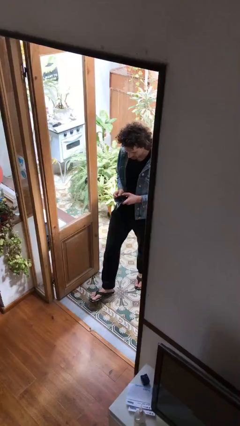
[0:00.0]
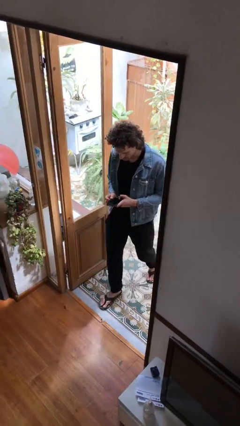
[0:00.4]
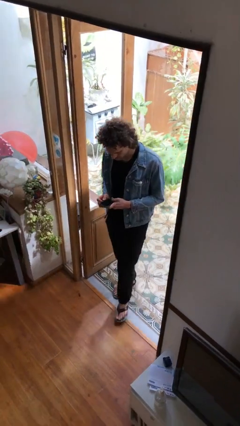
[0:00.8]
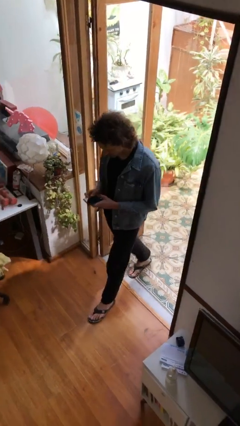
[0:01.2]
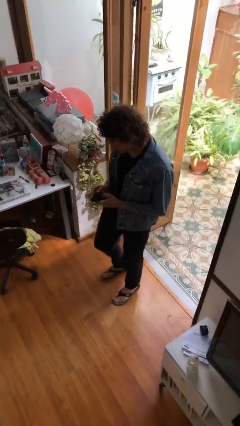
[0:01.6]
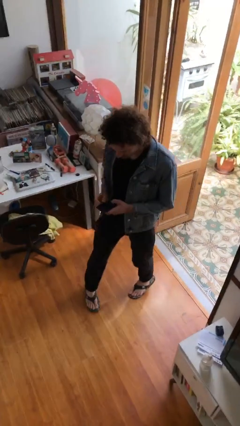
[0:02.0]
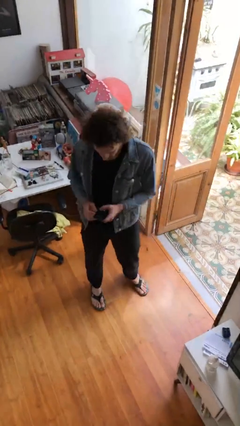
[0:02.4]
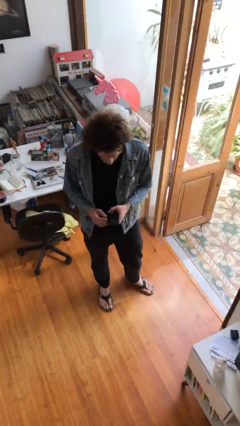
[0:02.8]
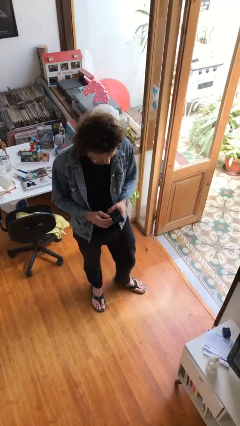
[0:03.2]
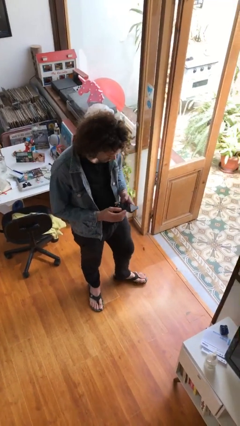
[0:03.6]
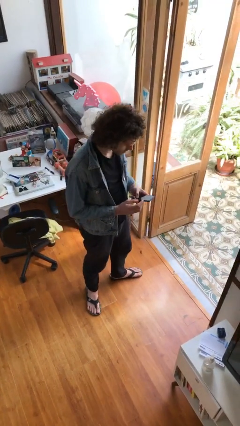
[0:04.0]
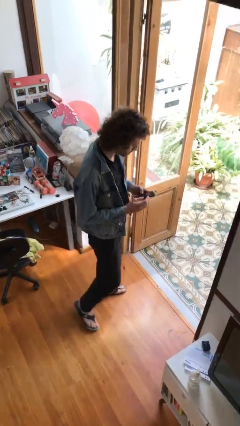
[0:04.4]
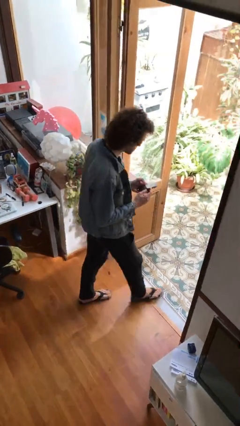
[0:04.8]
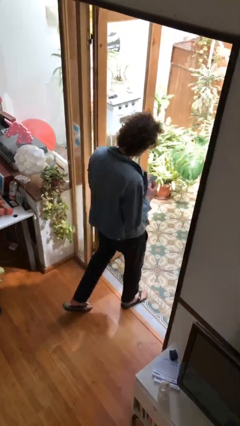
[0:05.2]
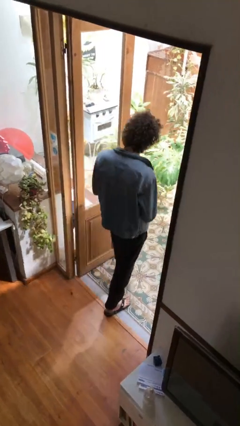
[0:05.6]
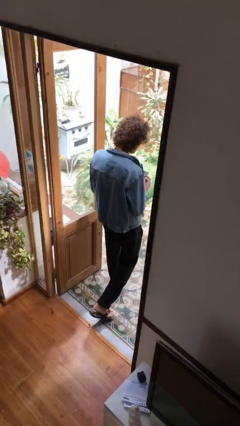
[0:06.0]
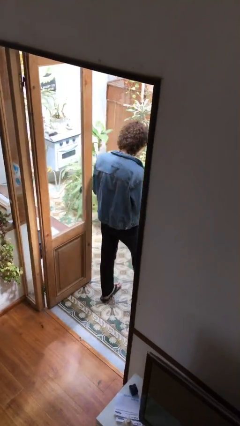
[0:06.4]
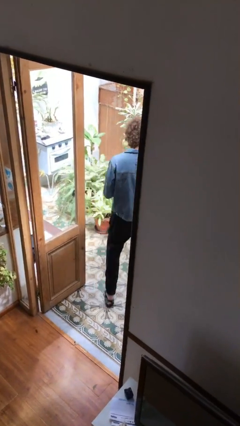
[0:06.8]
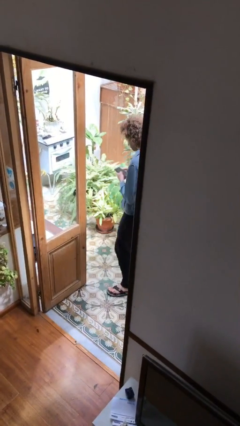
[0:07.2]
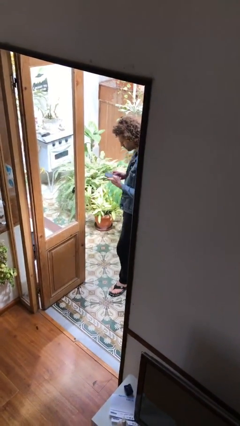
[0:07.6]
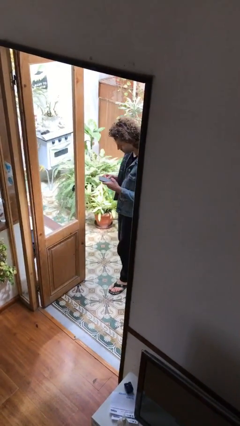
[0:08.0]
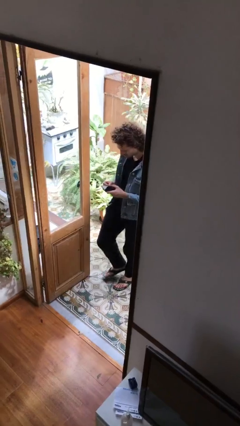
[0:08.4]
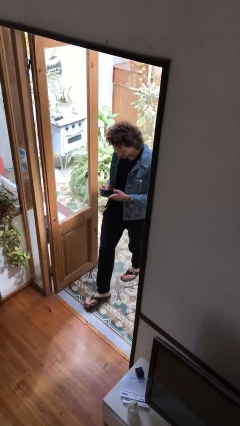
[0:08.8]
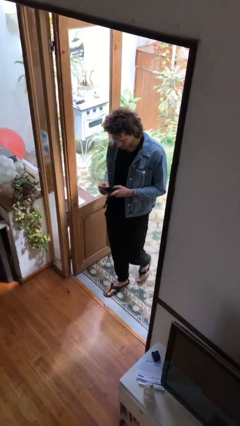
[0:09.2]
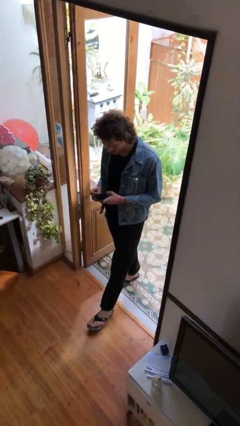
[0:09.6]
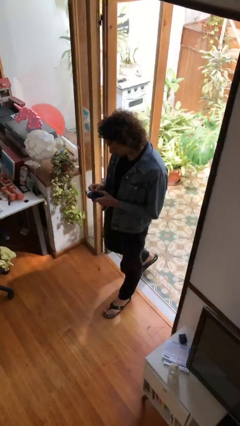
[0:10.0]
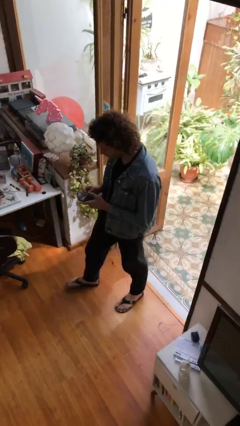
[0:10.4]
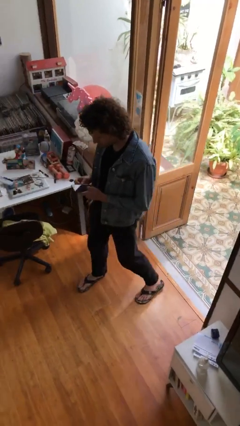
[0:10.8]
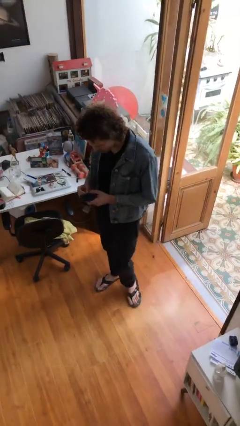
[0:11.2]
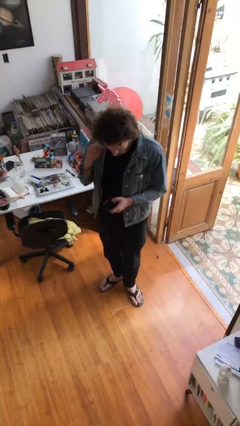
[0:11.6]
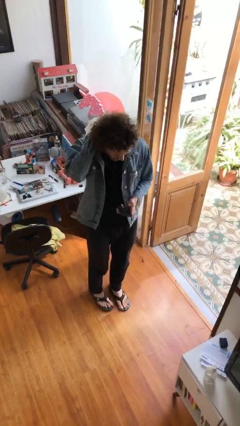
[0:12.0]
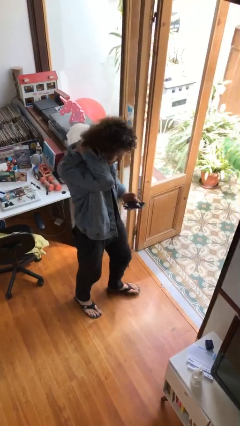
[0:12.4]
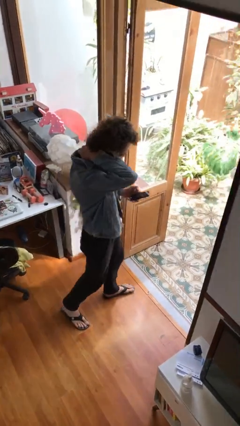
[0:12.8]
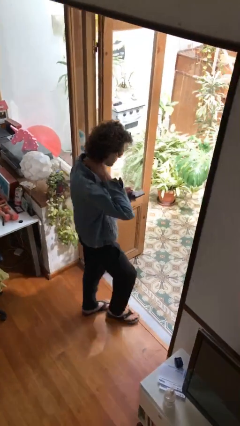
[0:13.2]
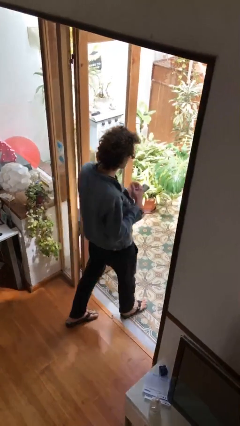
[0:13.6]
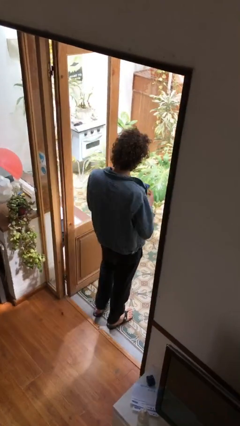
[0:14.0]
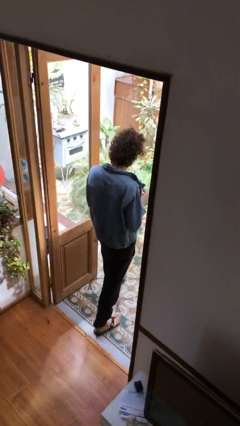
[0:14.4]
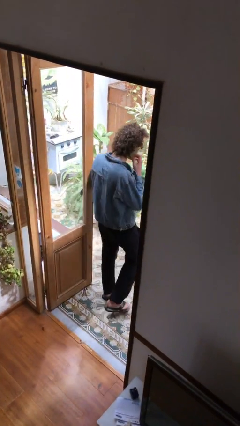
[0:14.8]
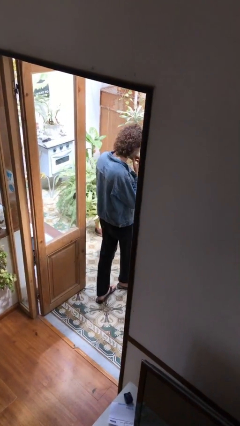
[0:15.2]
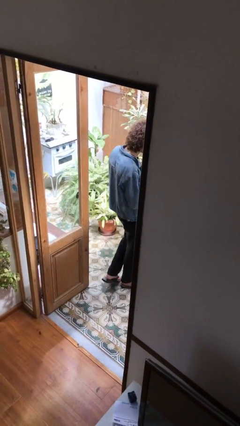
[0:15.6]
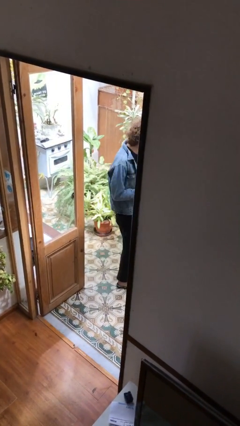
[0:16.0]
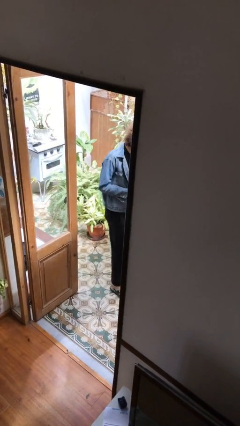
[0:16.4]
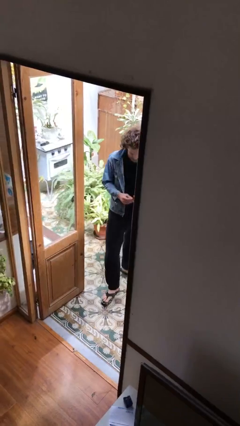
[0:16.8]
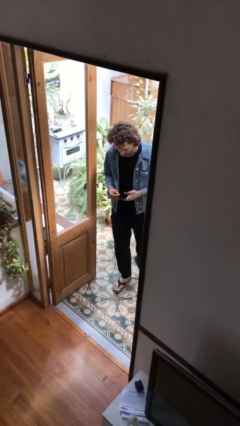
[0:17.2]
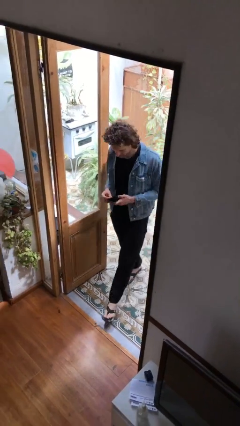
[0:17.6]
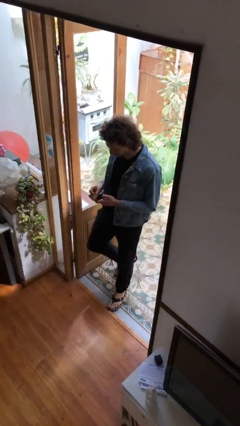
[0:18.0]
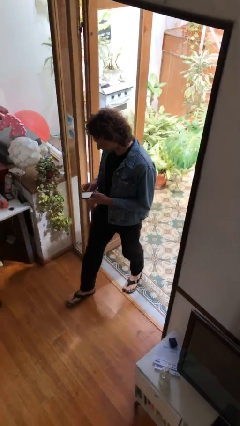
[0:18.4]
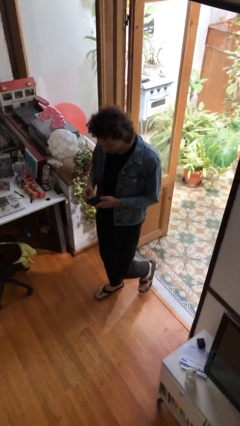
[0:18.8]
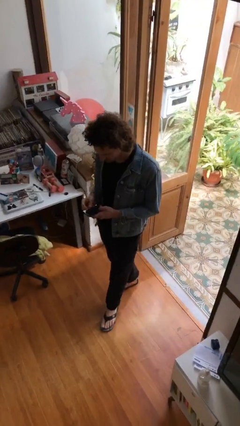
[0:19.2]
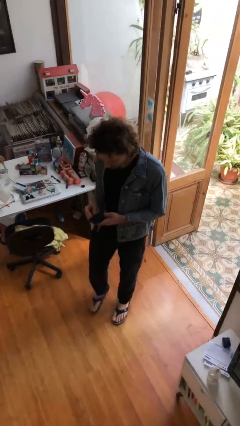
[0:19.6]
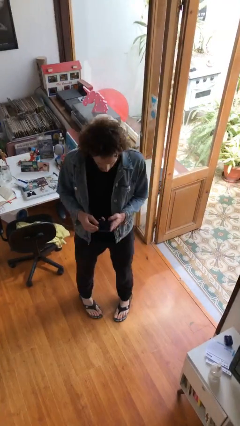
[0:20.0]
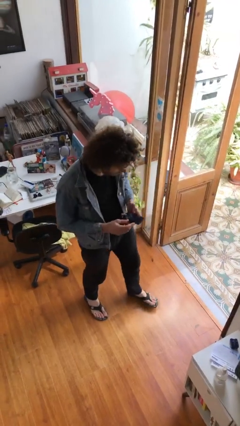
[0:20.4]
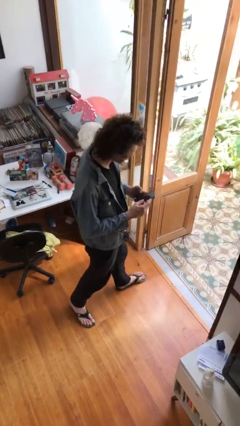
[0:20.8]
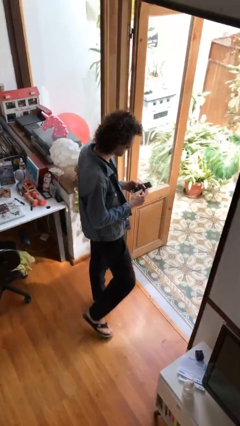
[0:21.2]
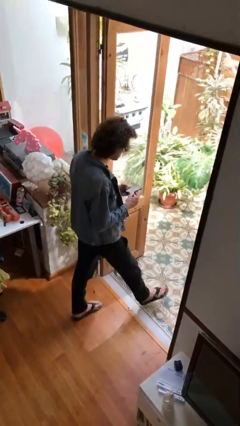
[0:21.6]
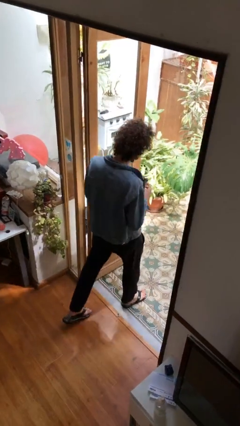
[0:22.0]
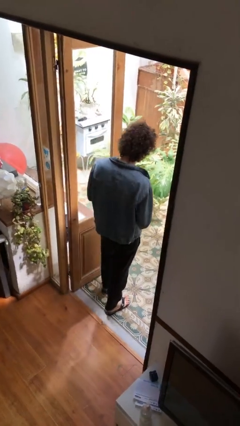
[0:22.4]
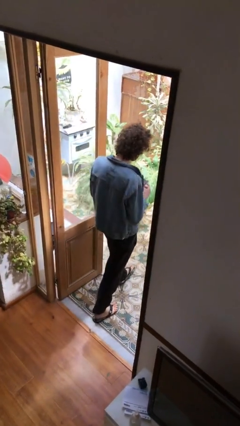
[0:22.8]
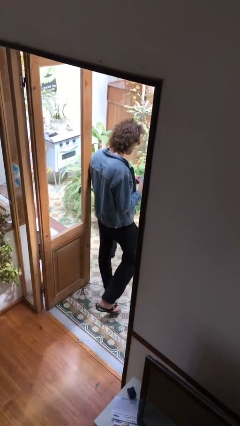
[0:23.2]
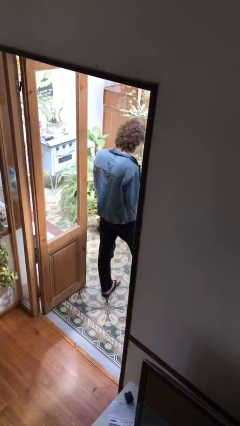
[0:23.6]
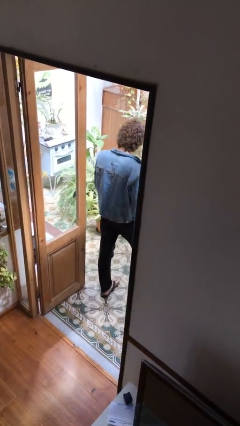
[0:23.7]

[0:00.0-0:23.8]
person texts on phone

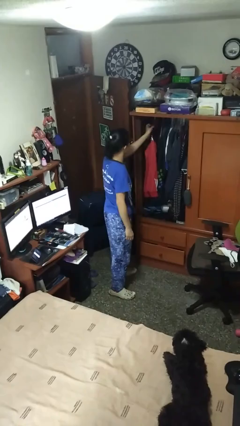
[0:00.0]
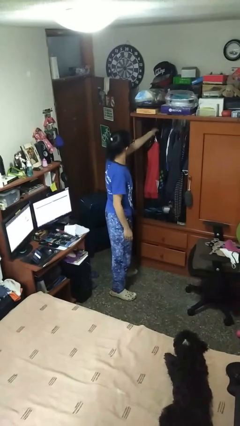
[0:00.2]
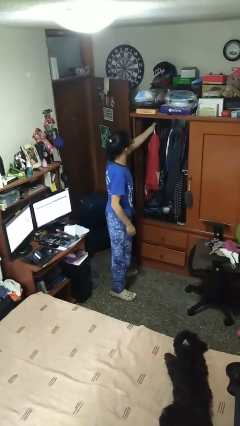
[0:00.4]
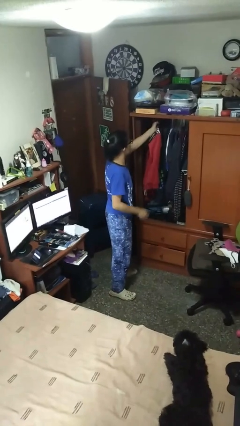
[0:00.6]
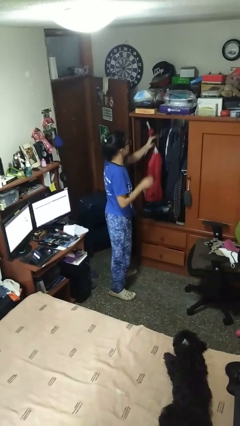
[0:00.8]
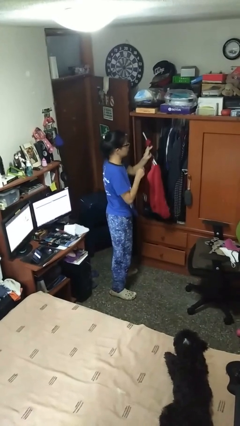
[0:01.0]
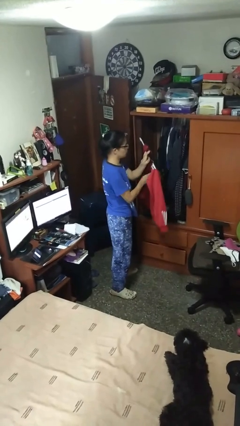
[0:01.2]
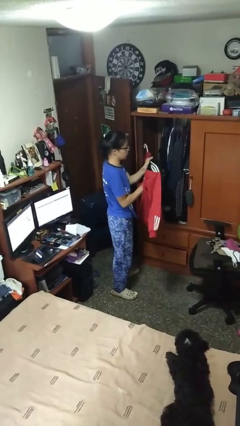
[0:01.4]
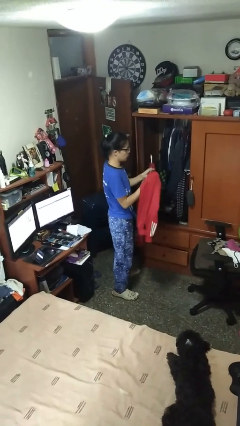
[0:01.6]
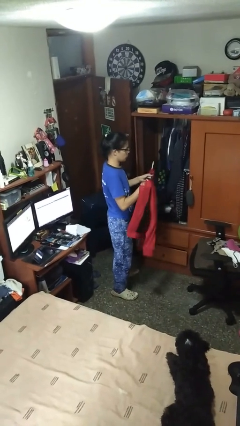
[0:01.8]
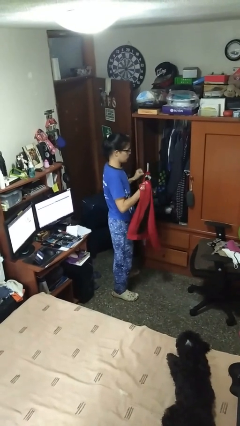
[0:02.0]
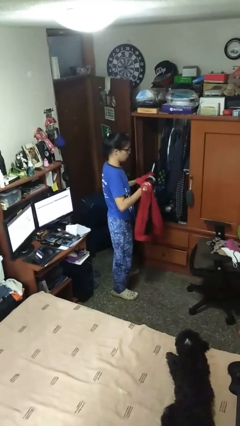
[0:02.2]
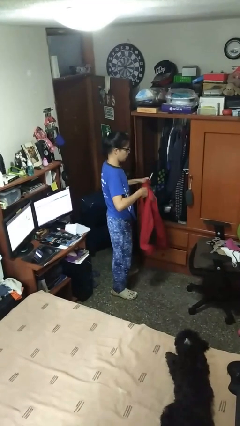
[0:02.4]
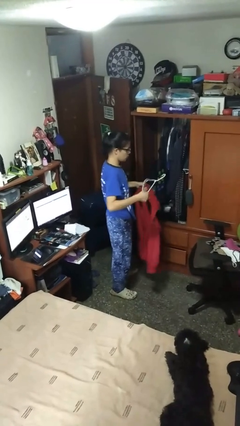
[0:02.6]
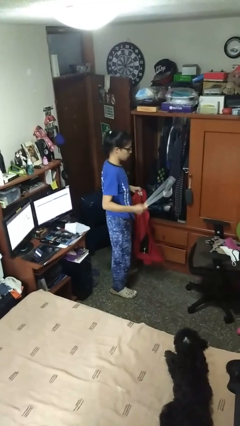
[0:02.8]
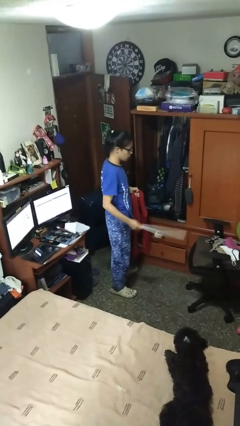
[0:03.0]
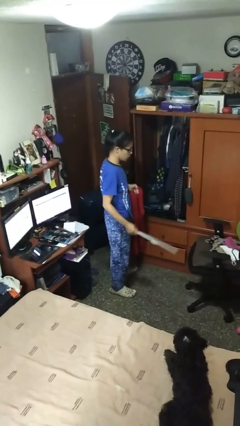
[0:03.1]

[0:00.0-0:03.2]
person takes clothes from closet

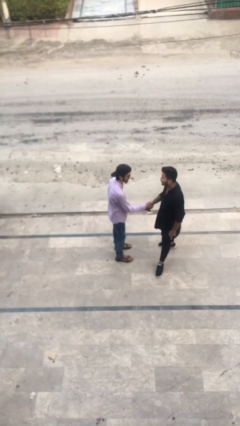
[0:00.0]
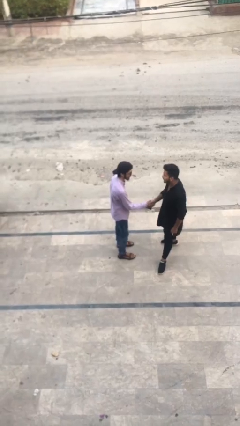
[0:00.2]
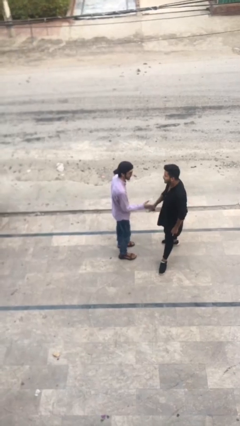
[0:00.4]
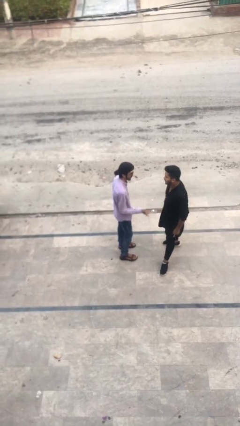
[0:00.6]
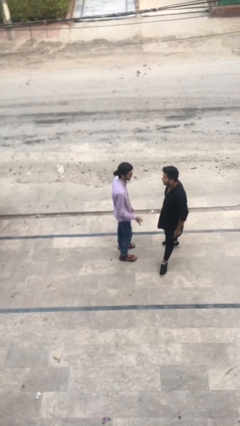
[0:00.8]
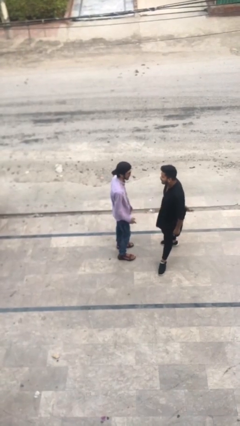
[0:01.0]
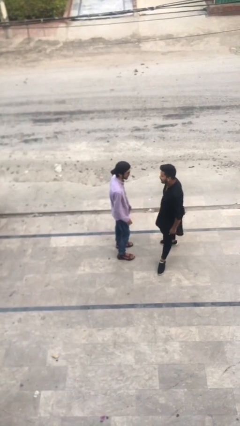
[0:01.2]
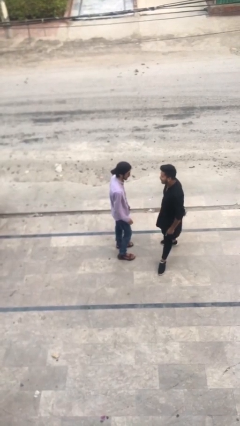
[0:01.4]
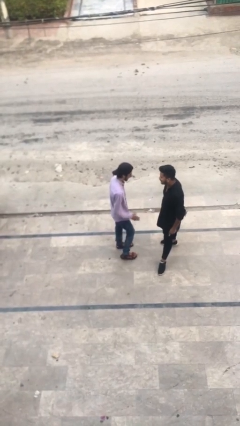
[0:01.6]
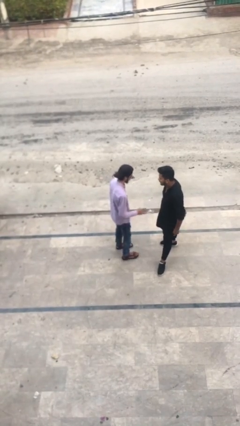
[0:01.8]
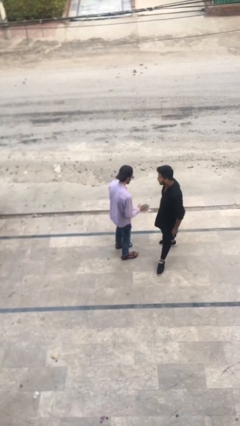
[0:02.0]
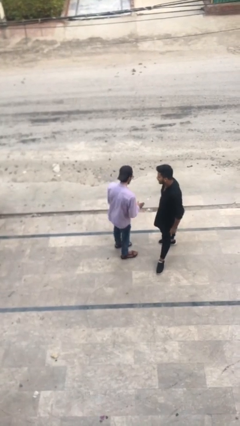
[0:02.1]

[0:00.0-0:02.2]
person talks to person
